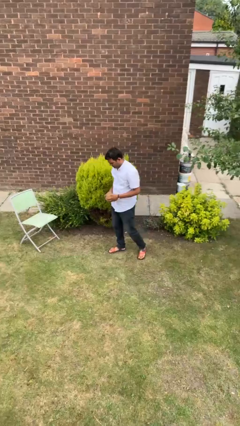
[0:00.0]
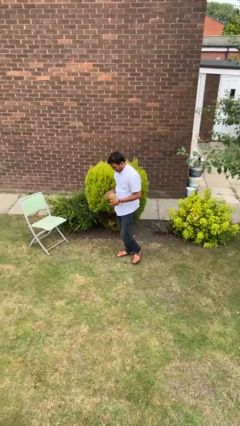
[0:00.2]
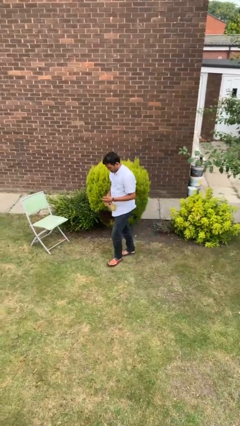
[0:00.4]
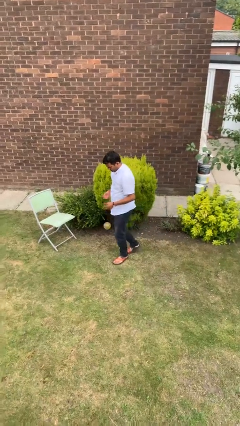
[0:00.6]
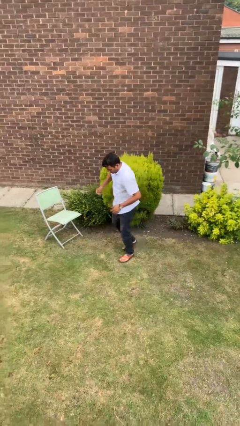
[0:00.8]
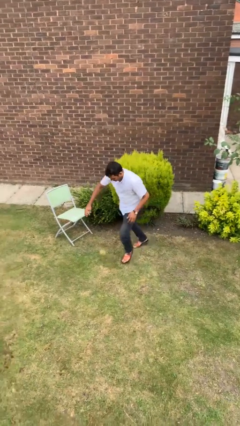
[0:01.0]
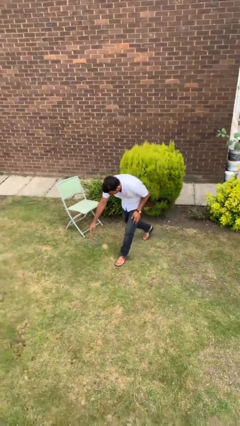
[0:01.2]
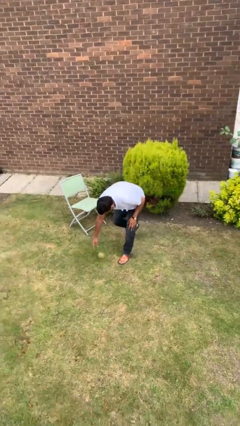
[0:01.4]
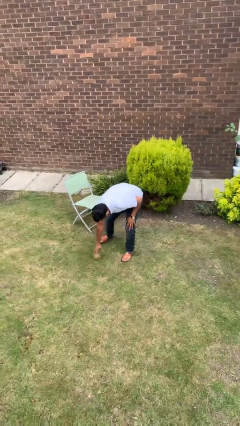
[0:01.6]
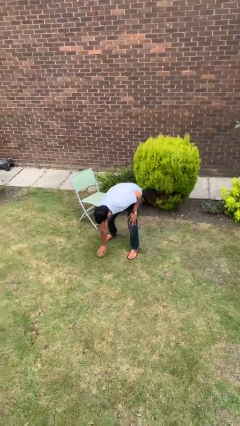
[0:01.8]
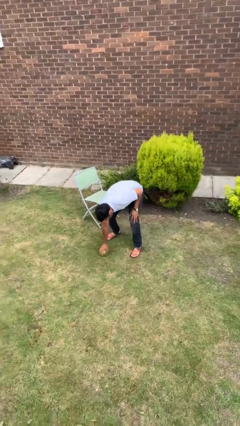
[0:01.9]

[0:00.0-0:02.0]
person drops object

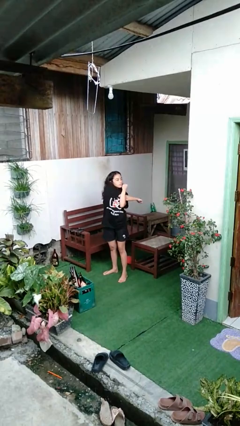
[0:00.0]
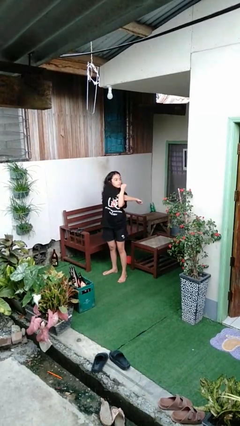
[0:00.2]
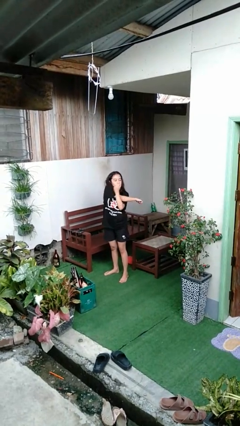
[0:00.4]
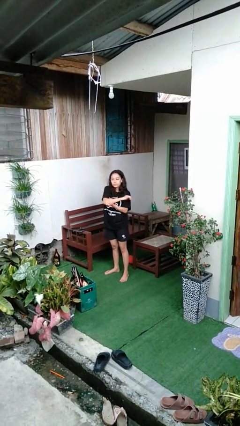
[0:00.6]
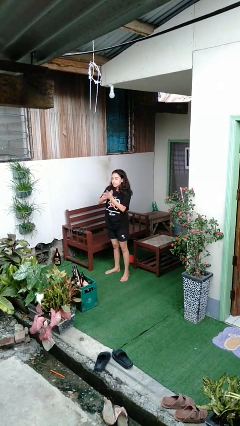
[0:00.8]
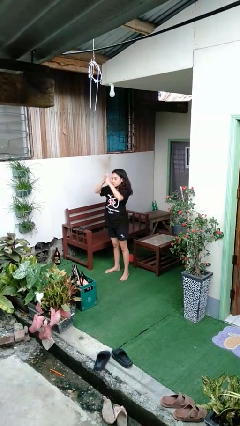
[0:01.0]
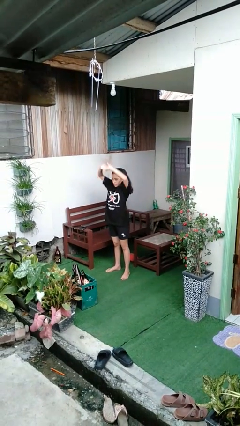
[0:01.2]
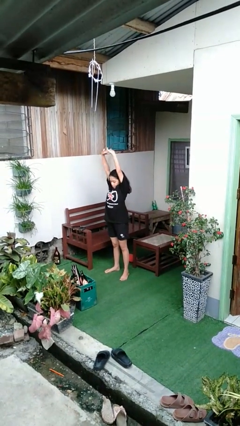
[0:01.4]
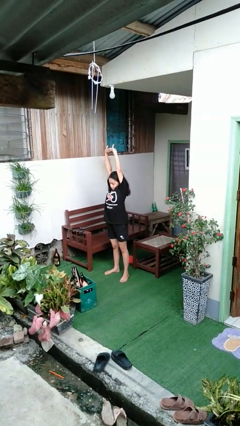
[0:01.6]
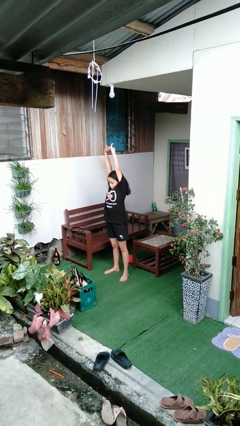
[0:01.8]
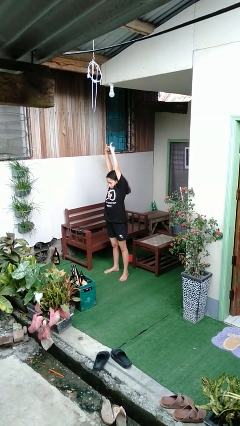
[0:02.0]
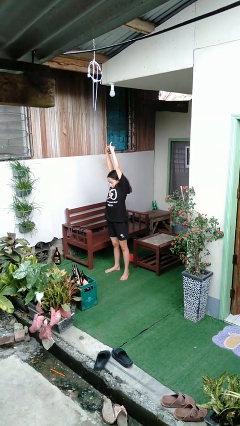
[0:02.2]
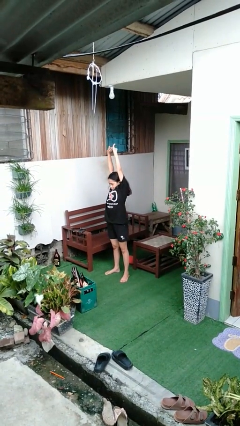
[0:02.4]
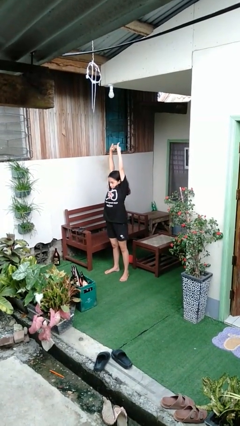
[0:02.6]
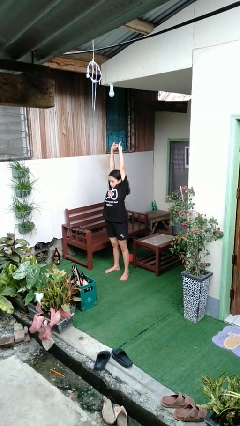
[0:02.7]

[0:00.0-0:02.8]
person stretches arms over head

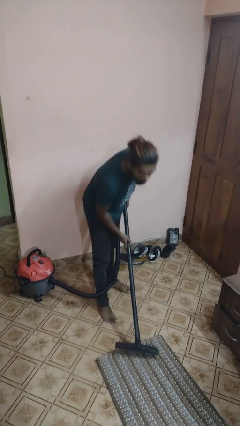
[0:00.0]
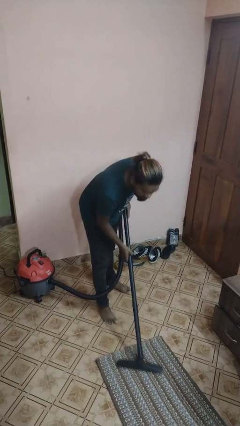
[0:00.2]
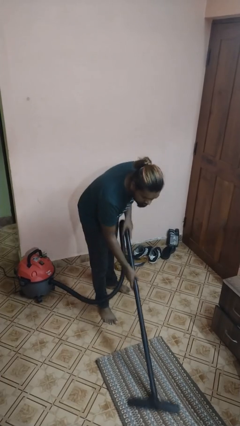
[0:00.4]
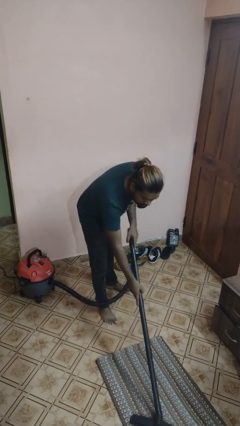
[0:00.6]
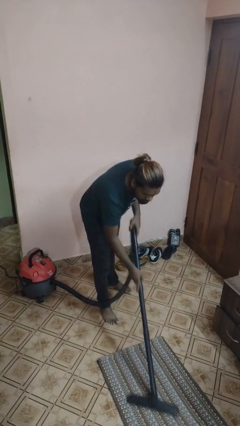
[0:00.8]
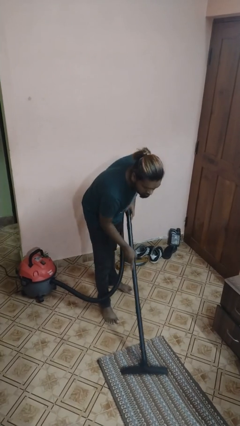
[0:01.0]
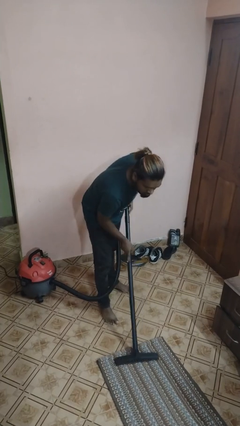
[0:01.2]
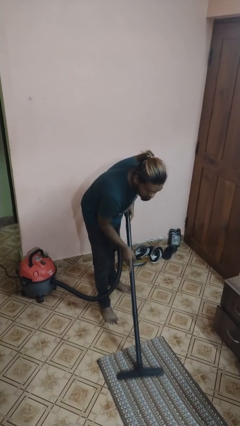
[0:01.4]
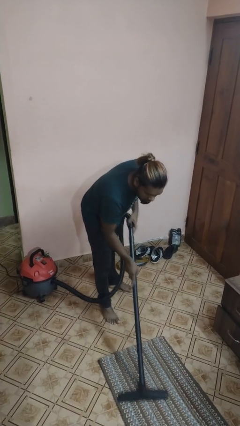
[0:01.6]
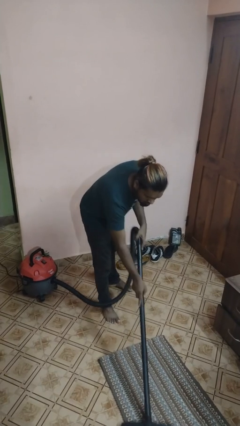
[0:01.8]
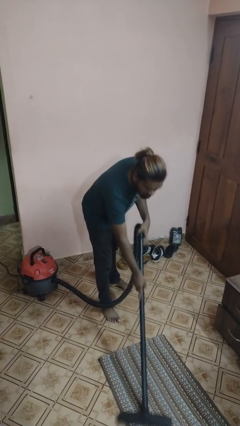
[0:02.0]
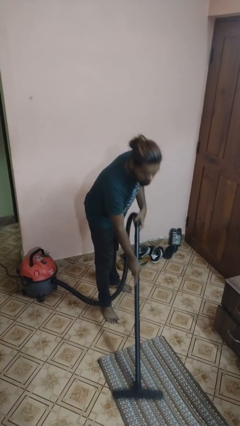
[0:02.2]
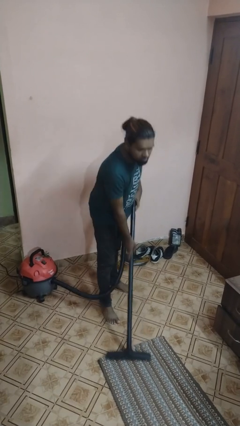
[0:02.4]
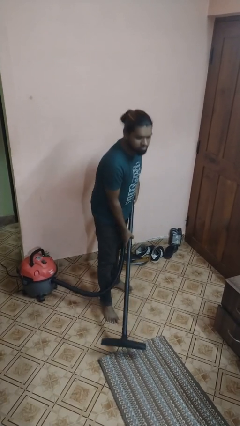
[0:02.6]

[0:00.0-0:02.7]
person vacuums carpet

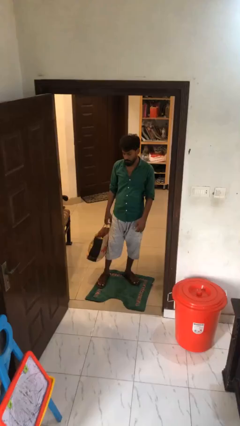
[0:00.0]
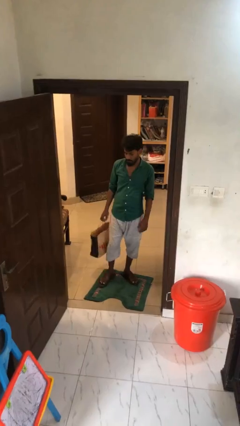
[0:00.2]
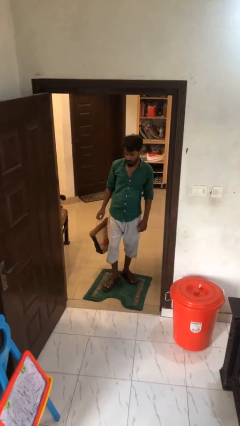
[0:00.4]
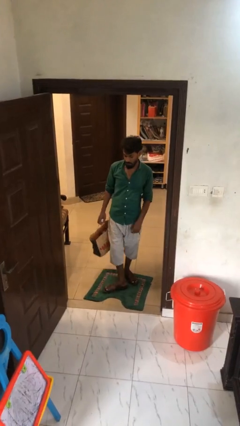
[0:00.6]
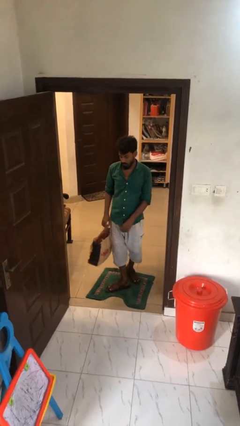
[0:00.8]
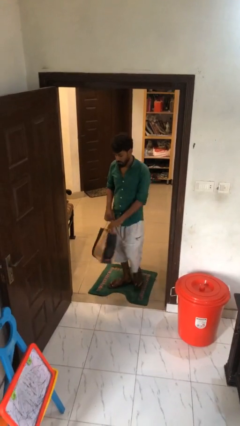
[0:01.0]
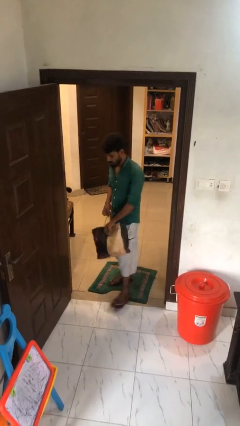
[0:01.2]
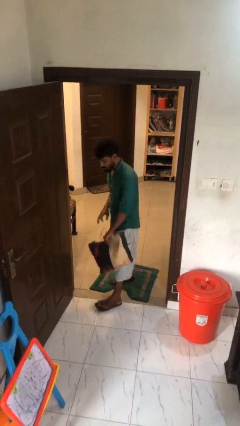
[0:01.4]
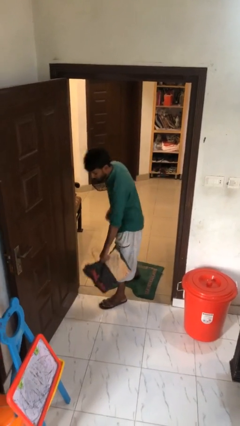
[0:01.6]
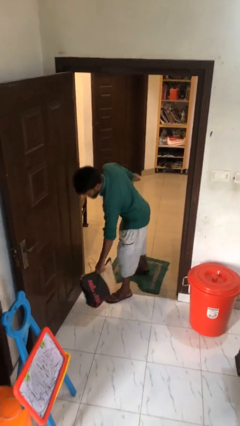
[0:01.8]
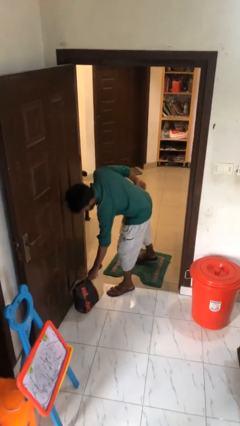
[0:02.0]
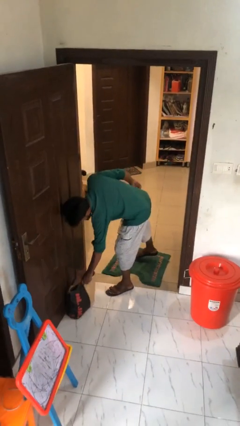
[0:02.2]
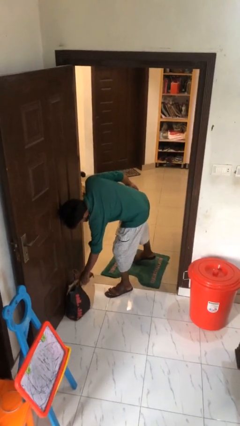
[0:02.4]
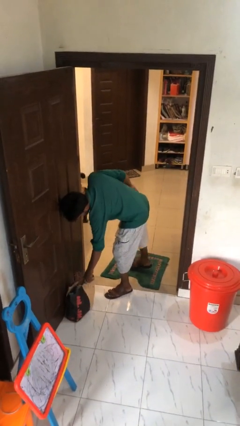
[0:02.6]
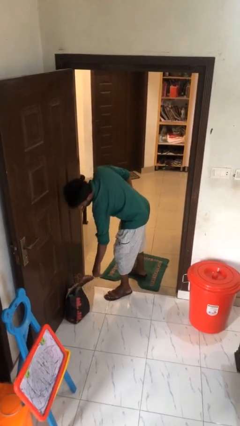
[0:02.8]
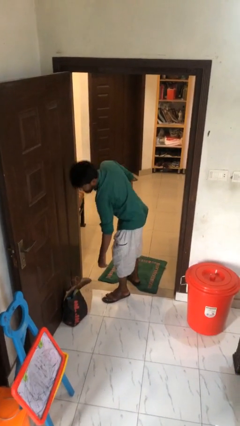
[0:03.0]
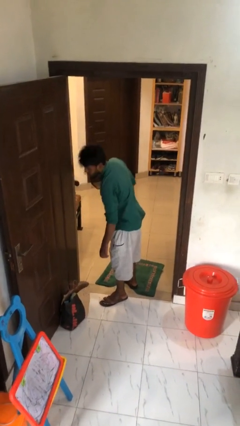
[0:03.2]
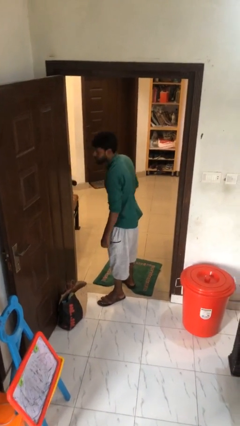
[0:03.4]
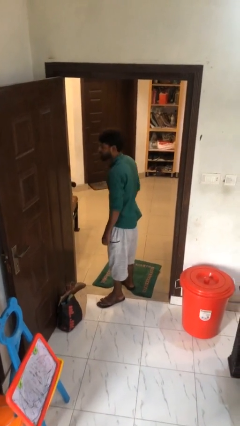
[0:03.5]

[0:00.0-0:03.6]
person puts down object on floor

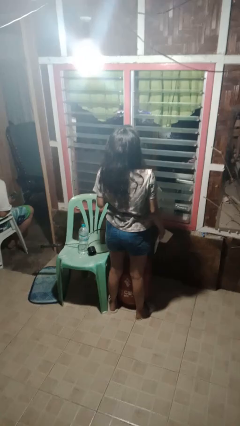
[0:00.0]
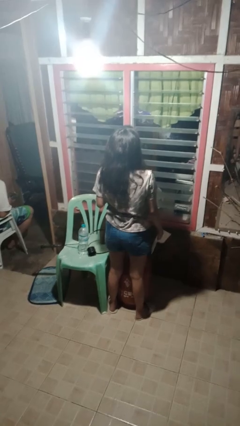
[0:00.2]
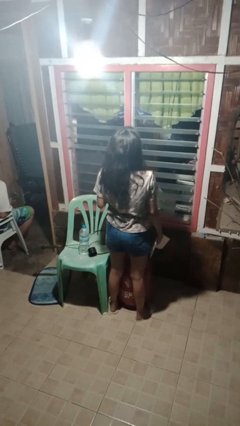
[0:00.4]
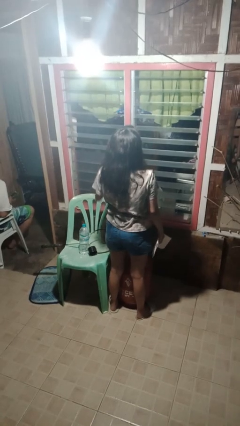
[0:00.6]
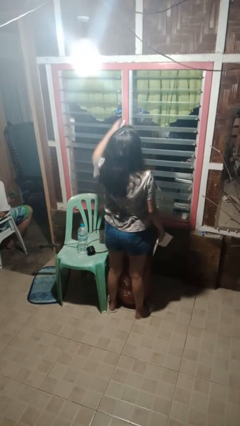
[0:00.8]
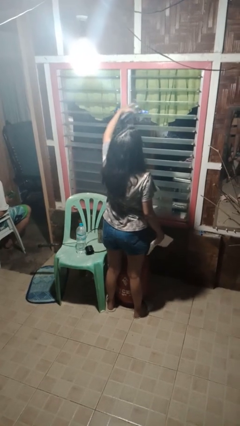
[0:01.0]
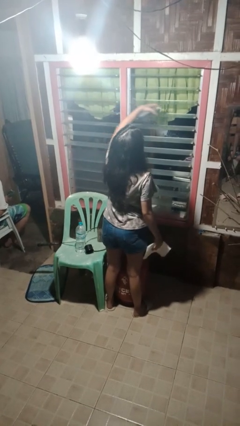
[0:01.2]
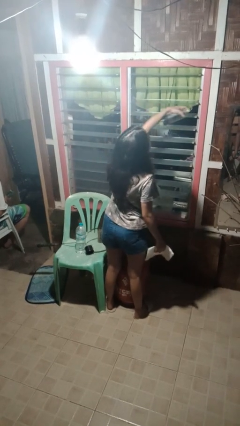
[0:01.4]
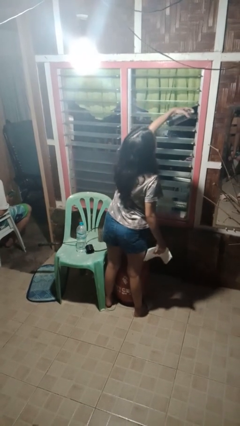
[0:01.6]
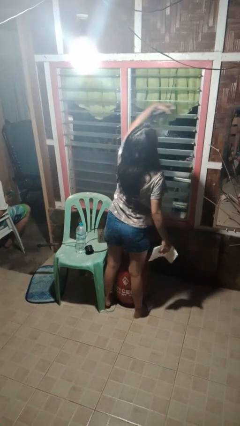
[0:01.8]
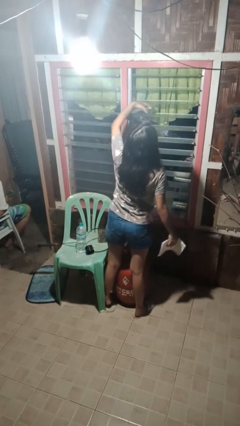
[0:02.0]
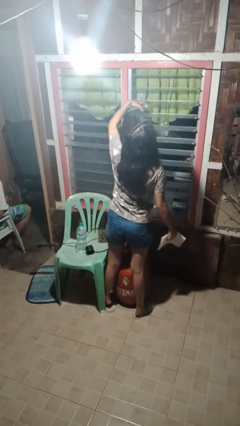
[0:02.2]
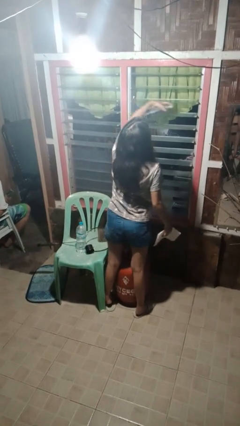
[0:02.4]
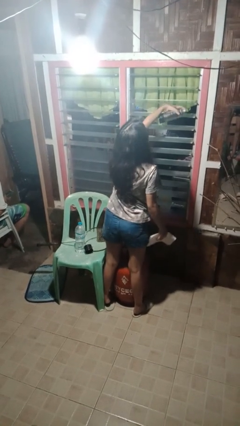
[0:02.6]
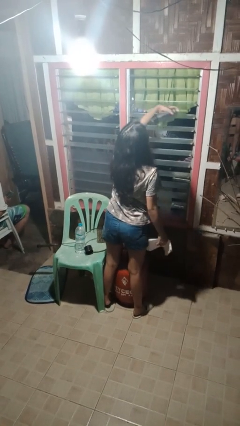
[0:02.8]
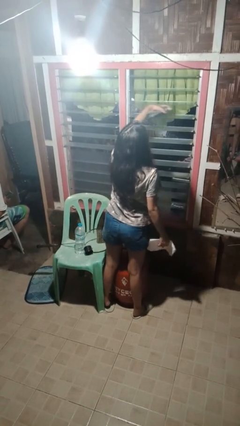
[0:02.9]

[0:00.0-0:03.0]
person sprays from bottle

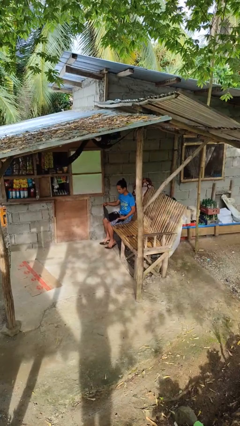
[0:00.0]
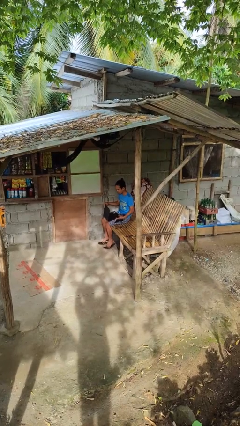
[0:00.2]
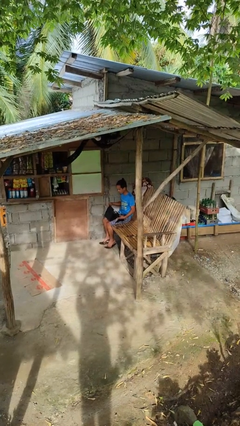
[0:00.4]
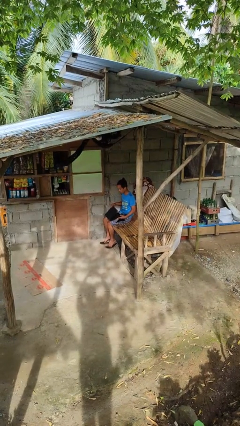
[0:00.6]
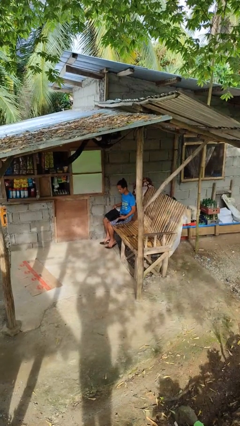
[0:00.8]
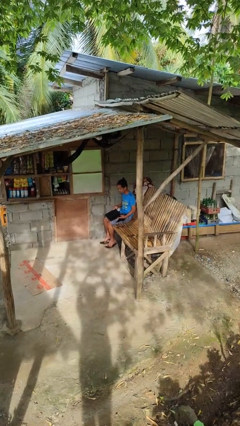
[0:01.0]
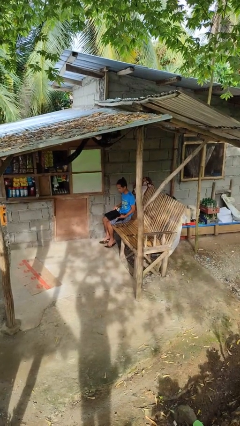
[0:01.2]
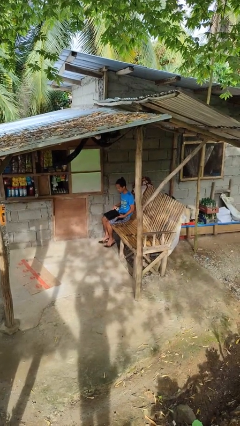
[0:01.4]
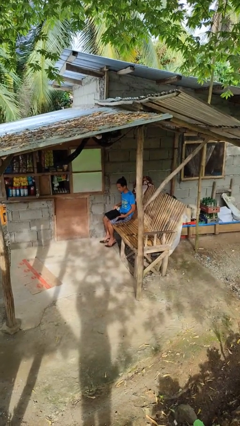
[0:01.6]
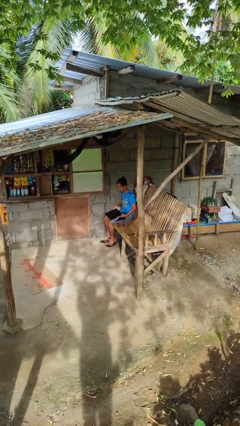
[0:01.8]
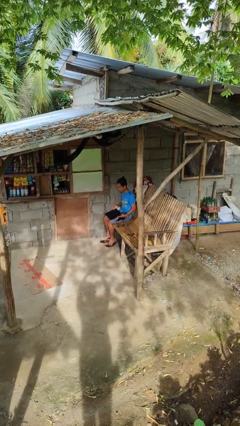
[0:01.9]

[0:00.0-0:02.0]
person closes laptop

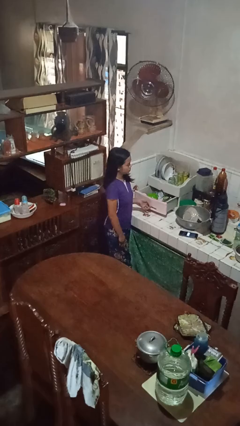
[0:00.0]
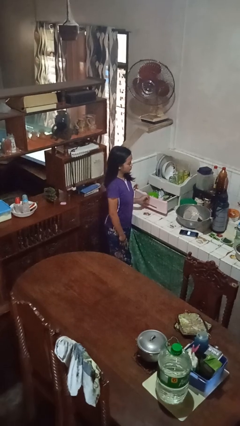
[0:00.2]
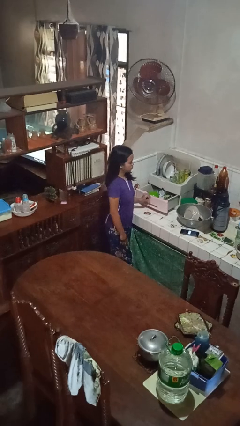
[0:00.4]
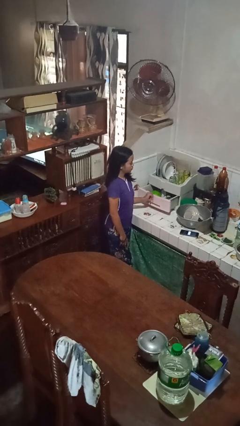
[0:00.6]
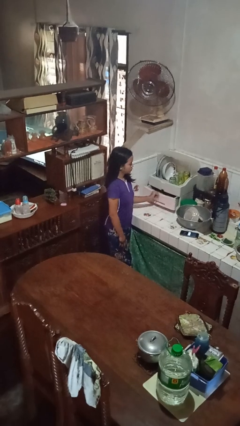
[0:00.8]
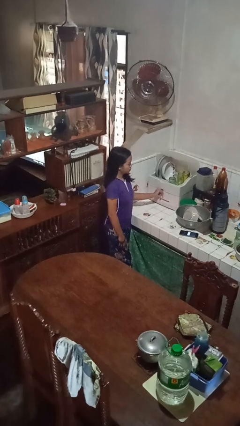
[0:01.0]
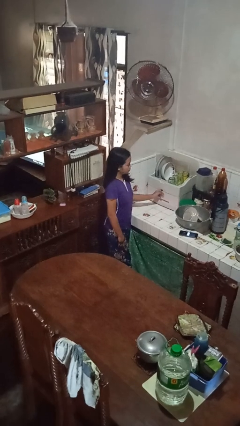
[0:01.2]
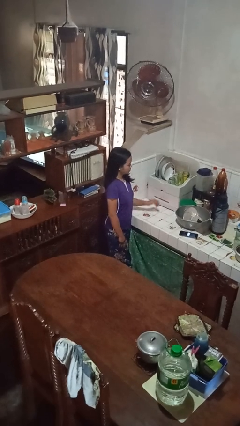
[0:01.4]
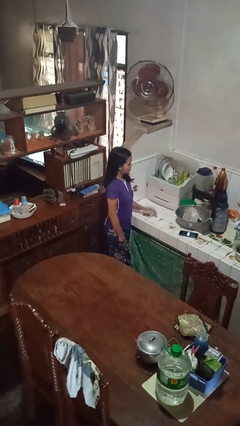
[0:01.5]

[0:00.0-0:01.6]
person closes kitchen drawer
